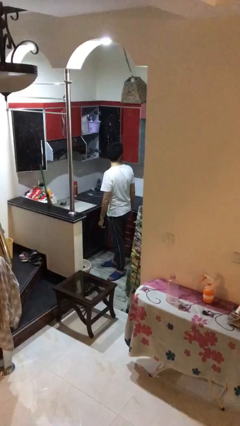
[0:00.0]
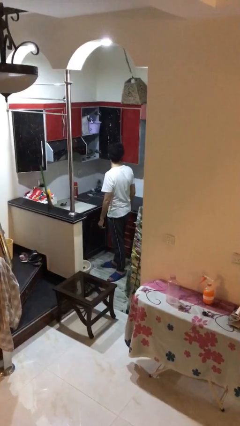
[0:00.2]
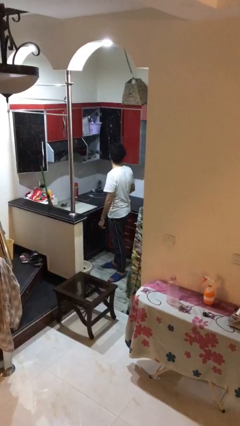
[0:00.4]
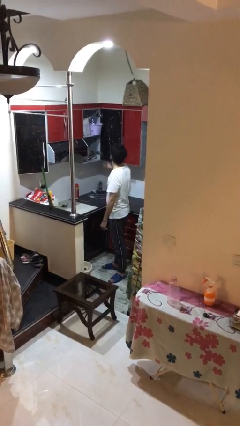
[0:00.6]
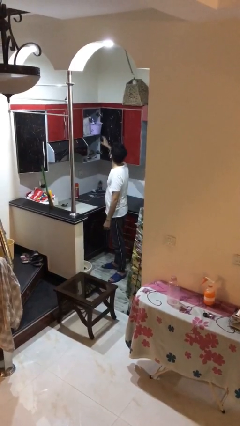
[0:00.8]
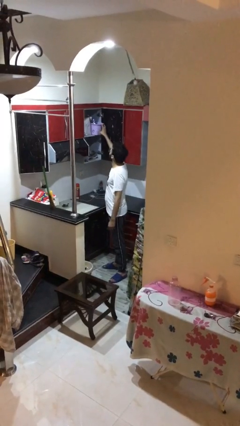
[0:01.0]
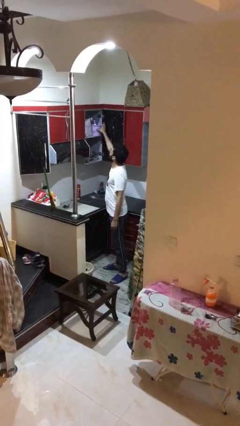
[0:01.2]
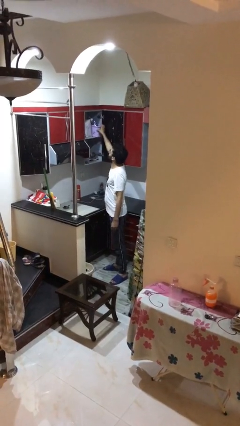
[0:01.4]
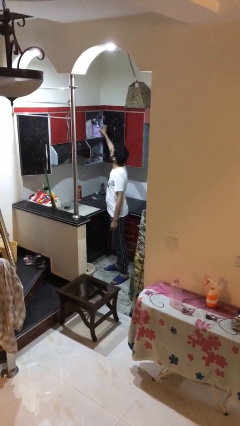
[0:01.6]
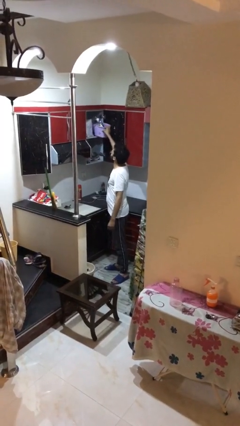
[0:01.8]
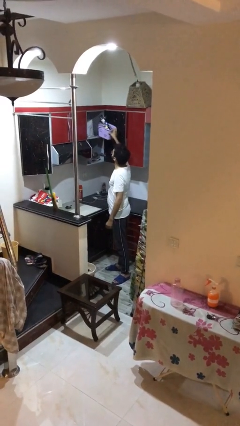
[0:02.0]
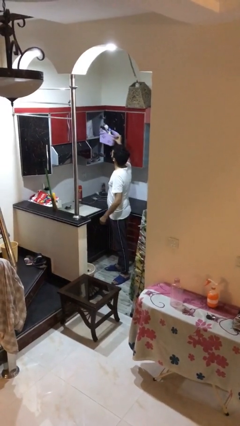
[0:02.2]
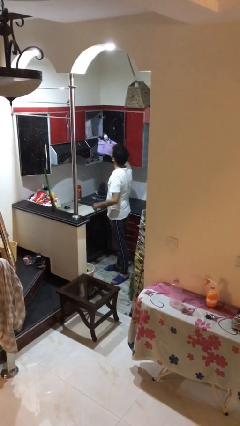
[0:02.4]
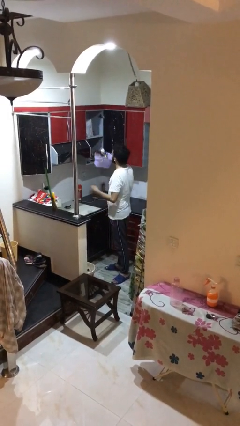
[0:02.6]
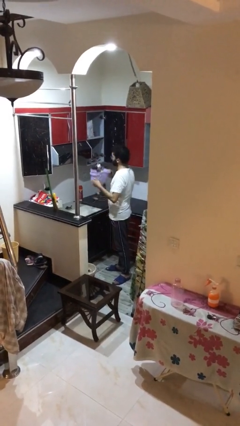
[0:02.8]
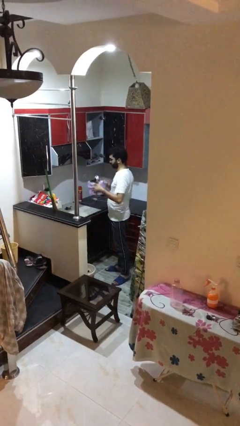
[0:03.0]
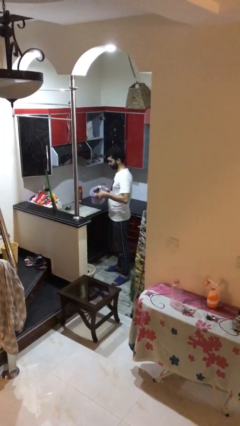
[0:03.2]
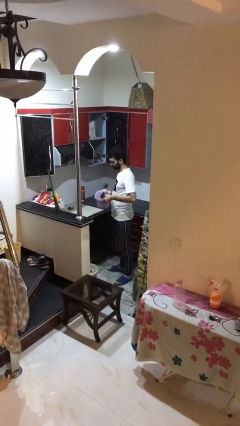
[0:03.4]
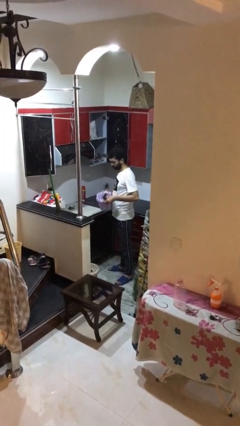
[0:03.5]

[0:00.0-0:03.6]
person picks up object from shelf

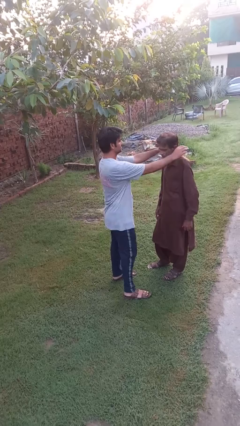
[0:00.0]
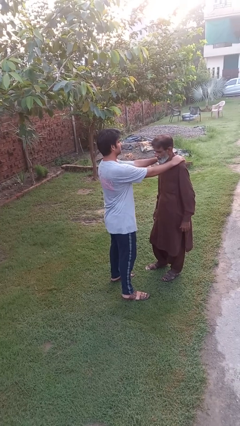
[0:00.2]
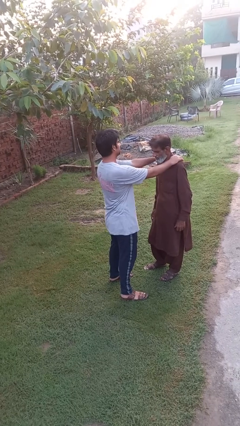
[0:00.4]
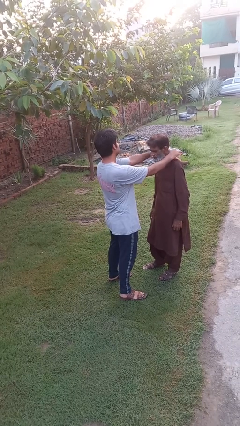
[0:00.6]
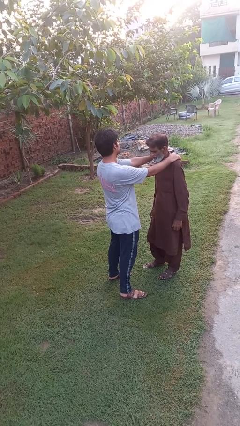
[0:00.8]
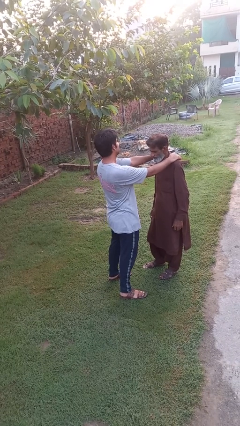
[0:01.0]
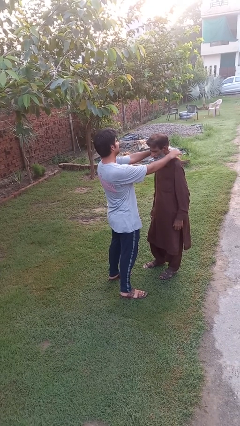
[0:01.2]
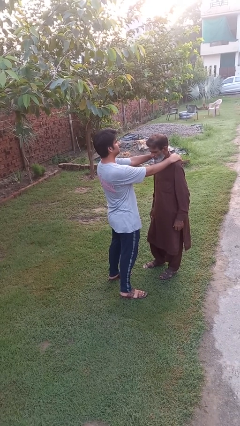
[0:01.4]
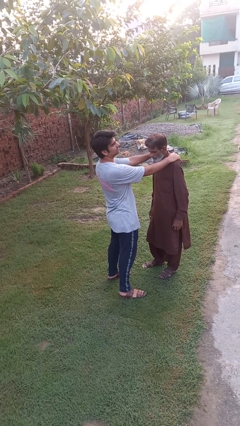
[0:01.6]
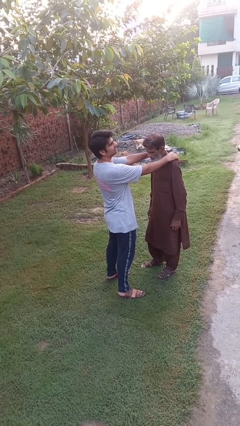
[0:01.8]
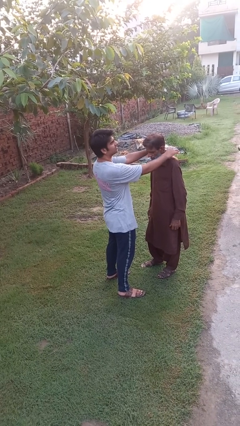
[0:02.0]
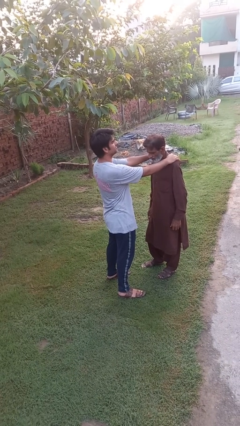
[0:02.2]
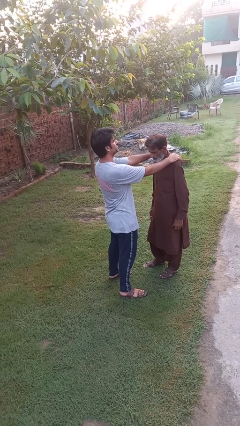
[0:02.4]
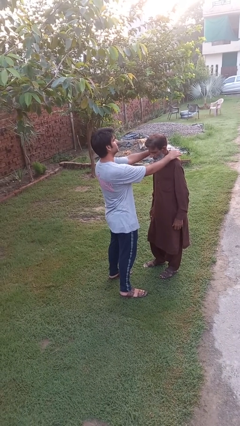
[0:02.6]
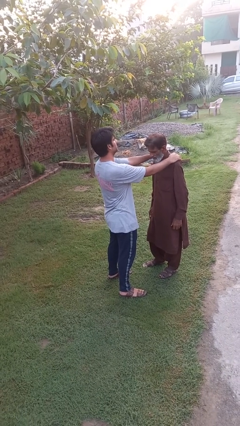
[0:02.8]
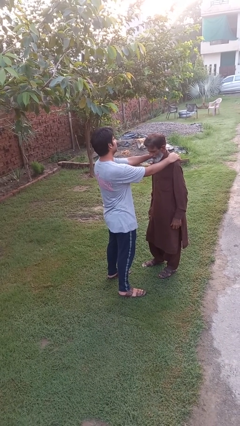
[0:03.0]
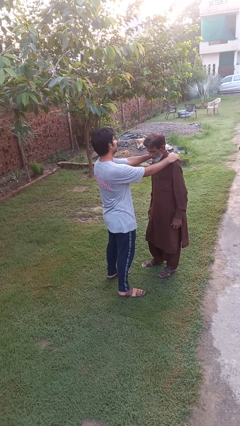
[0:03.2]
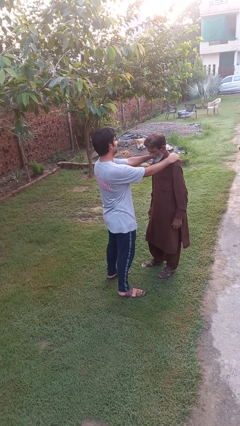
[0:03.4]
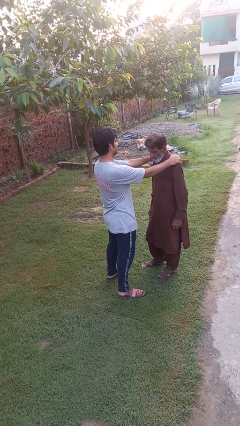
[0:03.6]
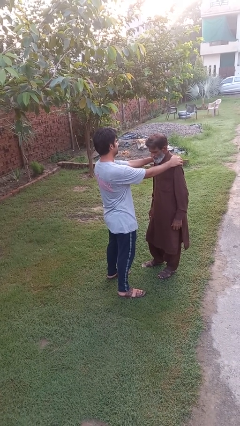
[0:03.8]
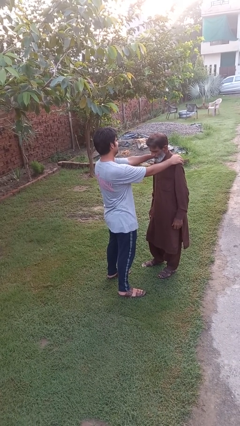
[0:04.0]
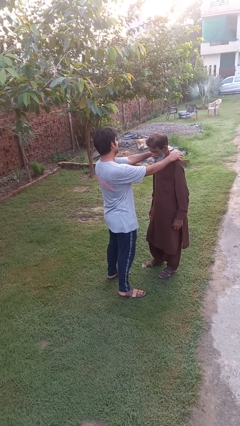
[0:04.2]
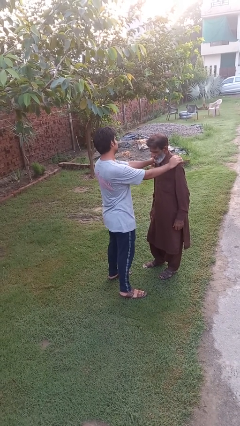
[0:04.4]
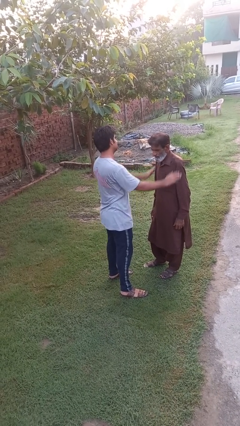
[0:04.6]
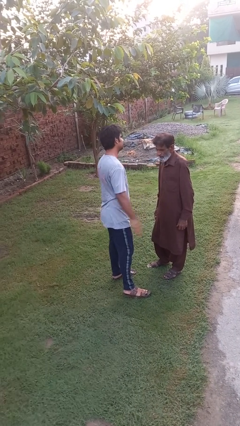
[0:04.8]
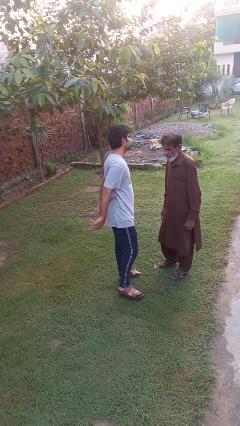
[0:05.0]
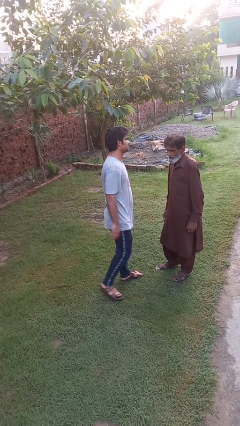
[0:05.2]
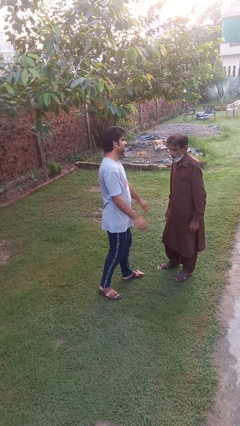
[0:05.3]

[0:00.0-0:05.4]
person pounds shoulders of person

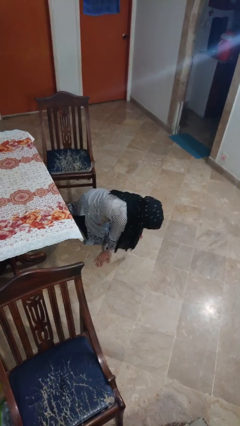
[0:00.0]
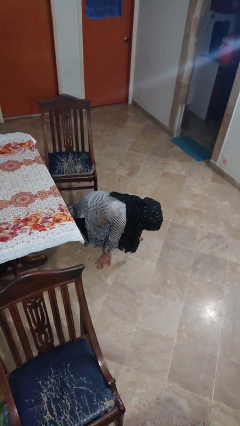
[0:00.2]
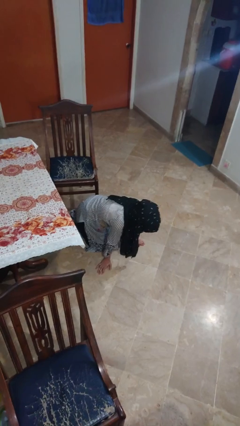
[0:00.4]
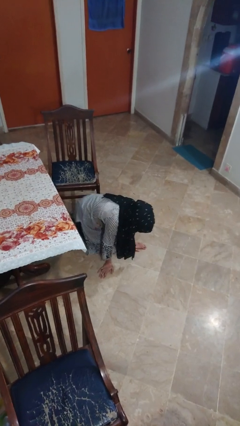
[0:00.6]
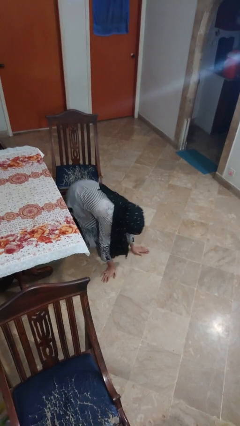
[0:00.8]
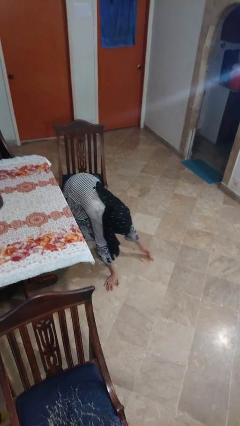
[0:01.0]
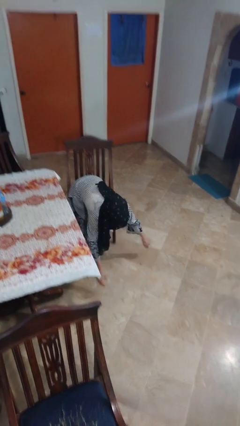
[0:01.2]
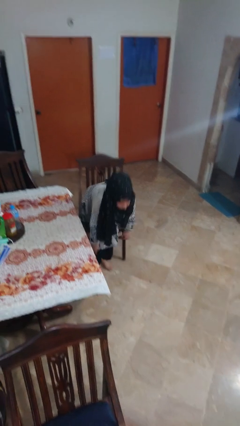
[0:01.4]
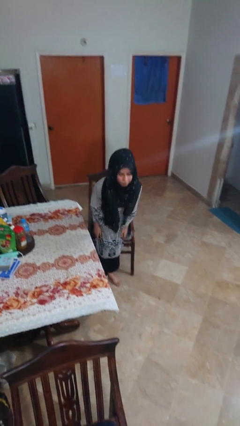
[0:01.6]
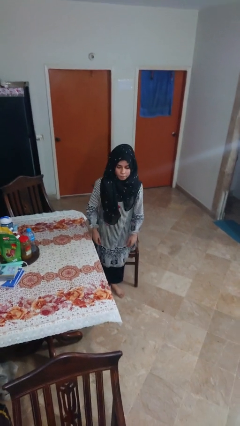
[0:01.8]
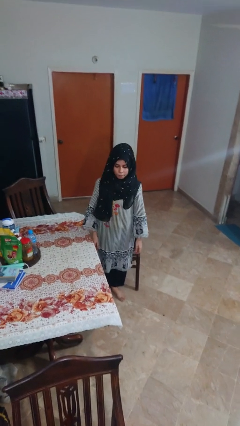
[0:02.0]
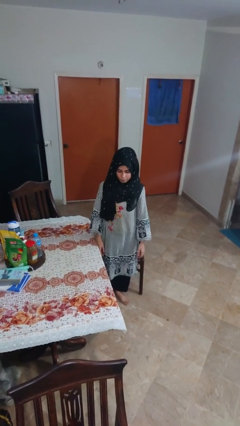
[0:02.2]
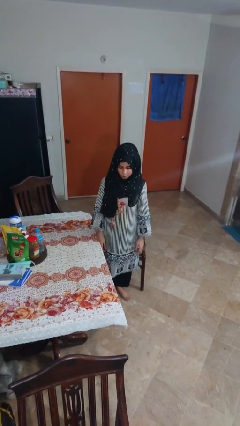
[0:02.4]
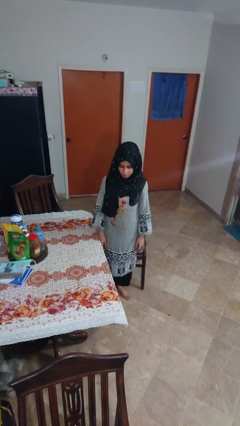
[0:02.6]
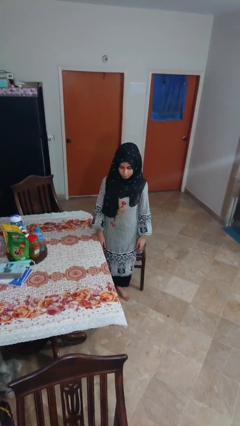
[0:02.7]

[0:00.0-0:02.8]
person stands up from floor

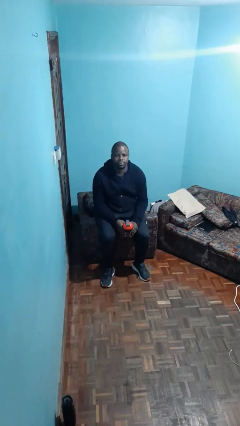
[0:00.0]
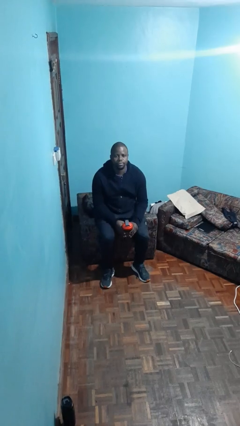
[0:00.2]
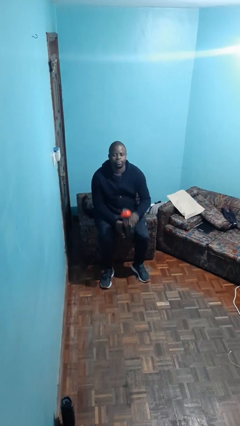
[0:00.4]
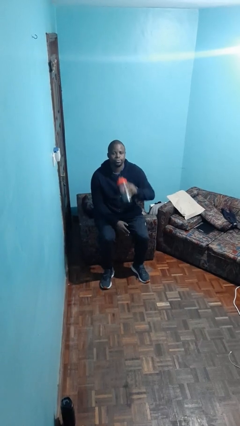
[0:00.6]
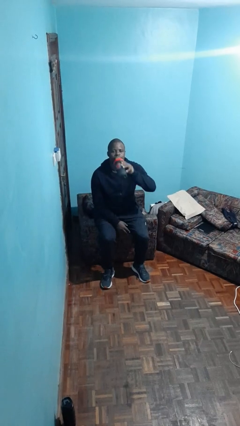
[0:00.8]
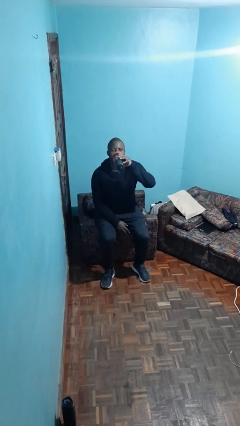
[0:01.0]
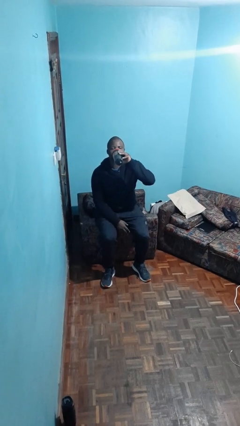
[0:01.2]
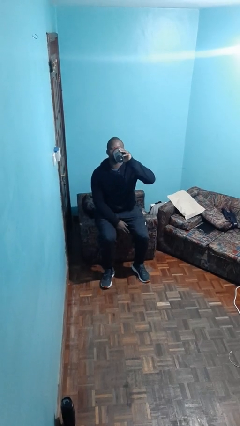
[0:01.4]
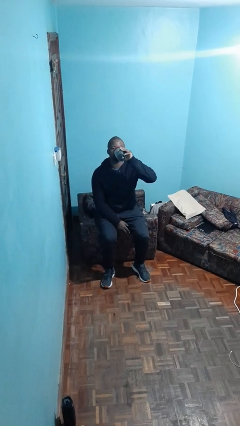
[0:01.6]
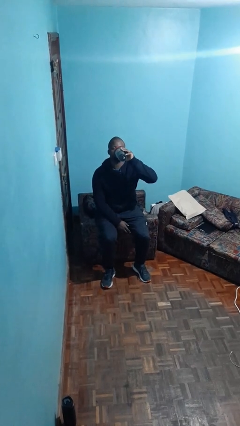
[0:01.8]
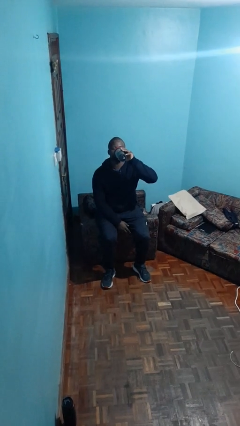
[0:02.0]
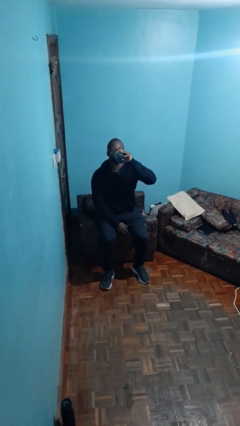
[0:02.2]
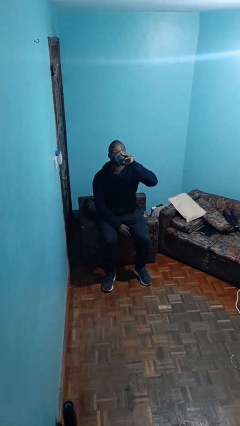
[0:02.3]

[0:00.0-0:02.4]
person drinks from bottle

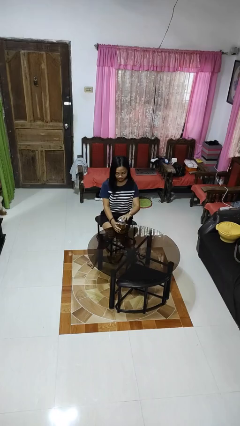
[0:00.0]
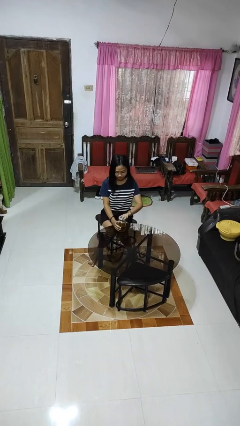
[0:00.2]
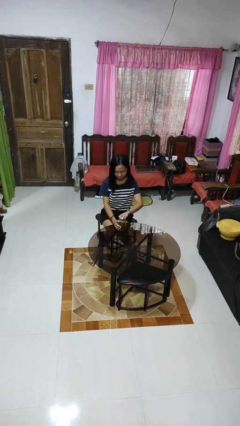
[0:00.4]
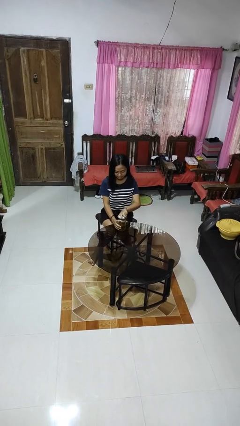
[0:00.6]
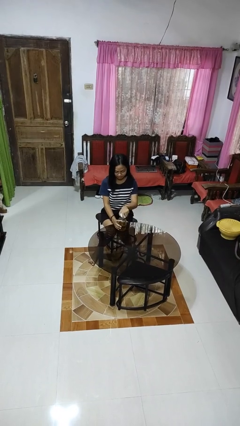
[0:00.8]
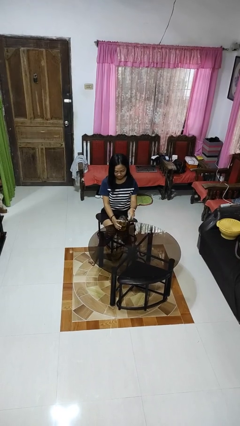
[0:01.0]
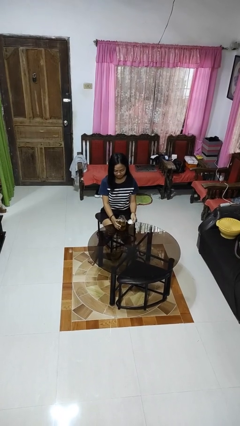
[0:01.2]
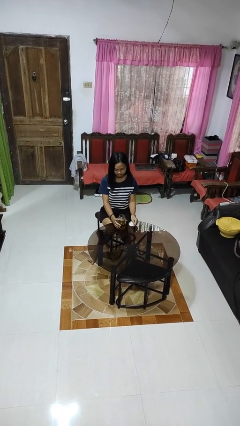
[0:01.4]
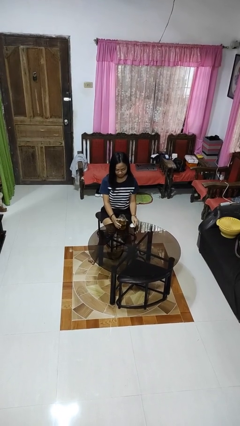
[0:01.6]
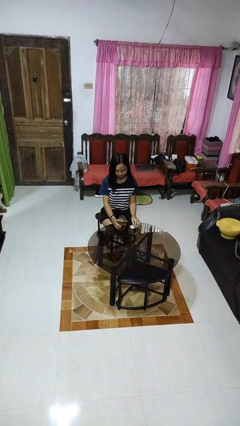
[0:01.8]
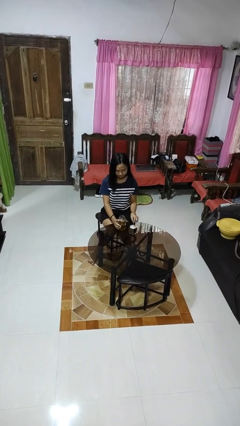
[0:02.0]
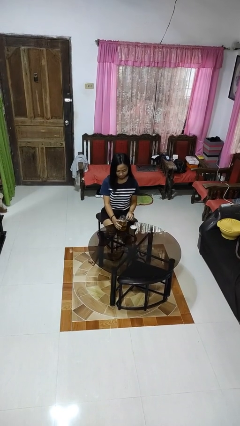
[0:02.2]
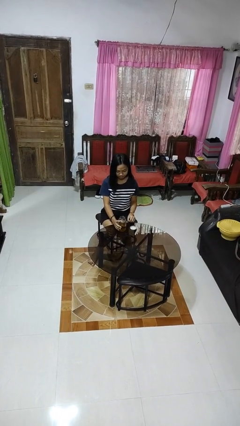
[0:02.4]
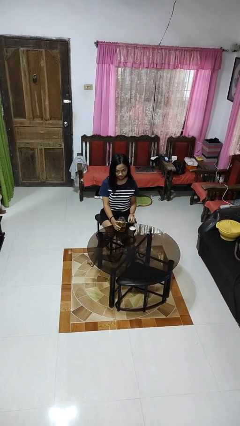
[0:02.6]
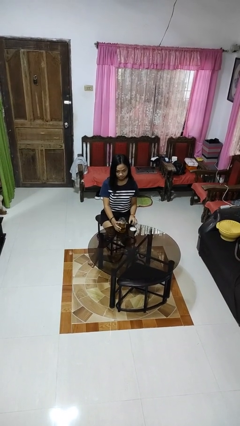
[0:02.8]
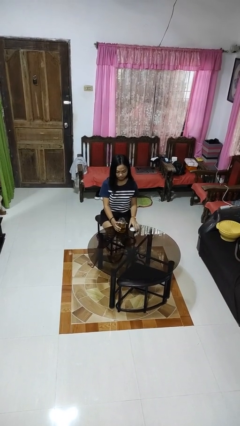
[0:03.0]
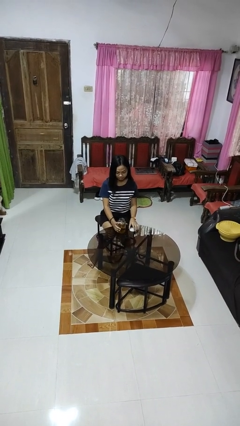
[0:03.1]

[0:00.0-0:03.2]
person opens jar

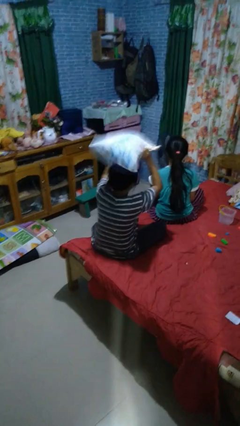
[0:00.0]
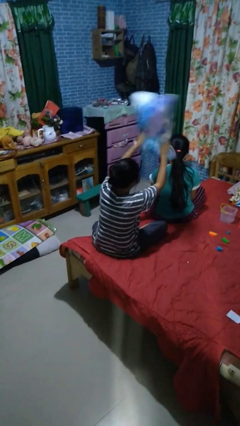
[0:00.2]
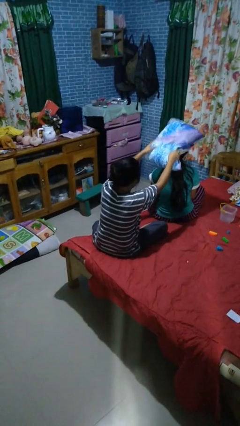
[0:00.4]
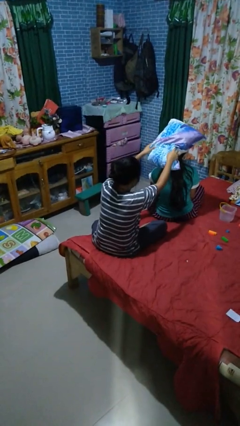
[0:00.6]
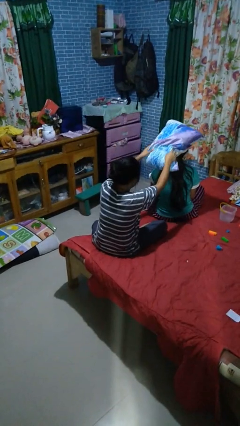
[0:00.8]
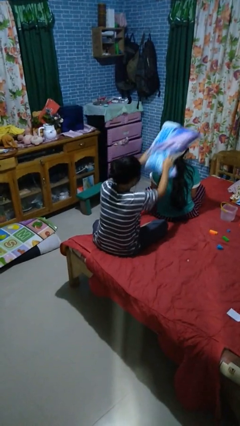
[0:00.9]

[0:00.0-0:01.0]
person hits person with pillow
